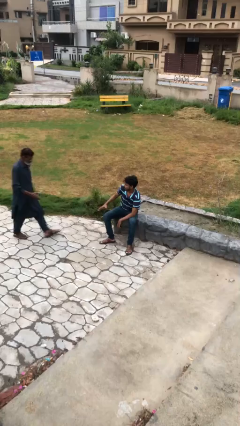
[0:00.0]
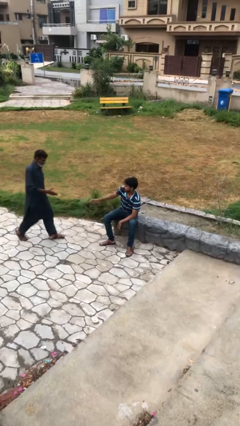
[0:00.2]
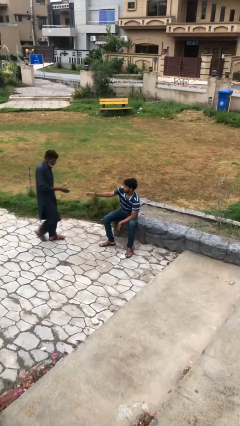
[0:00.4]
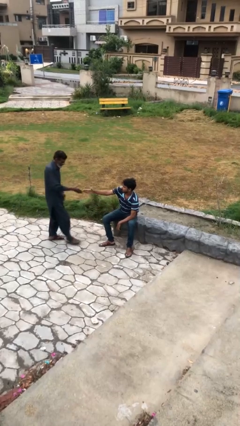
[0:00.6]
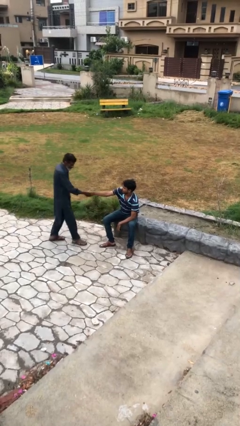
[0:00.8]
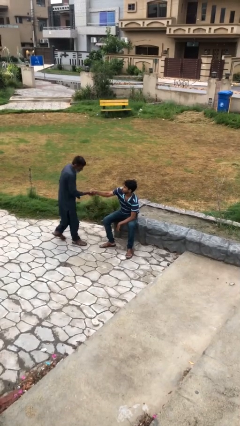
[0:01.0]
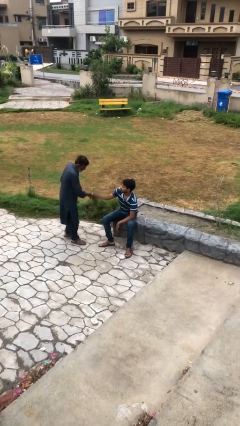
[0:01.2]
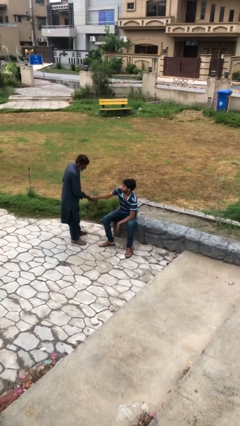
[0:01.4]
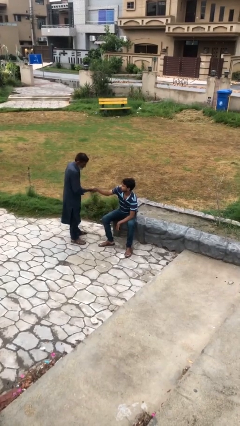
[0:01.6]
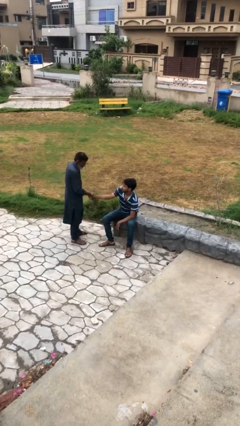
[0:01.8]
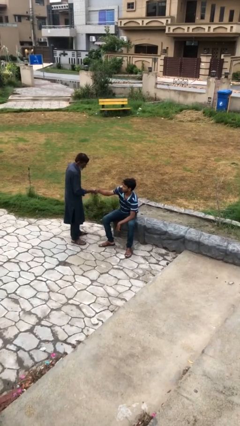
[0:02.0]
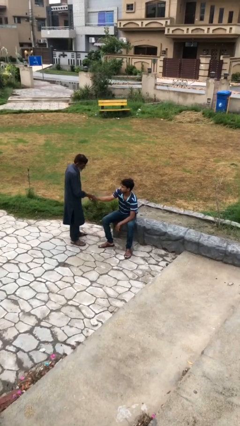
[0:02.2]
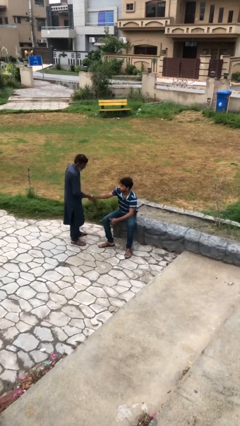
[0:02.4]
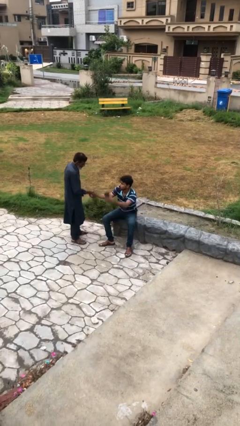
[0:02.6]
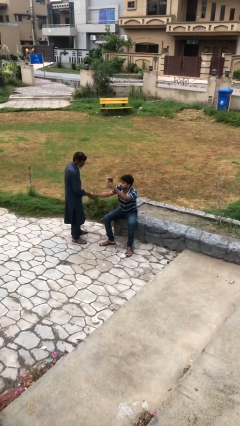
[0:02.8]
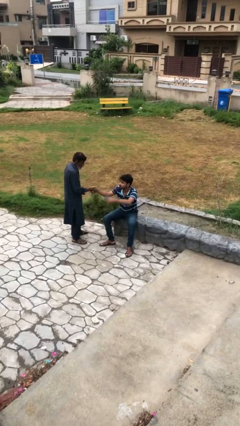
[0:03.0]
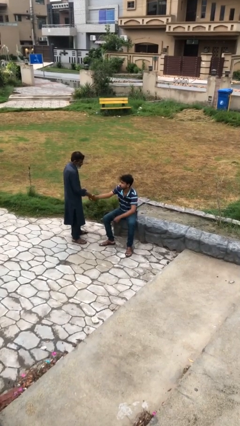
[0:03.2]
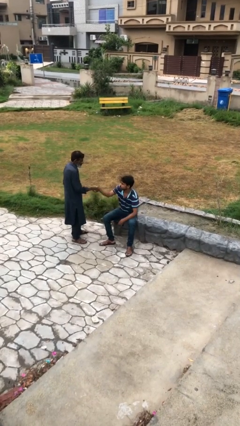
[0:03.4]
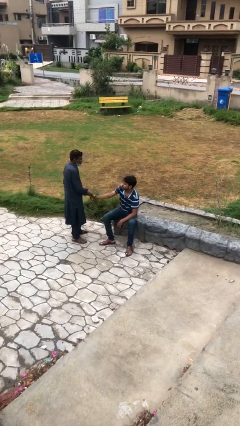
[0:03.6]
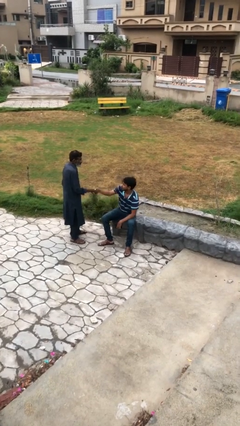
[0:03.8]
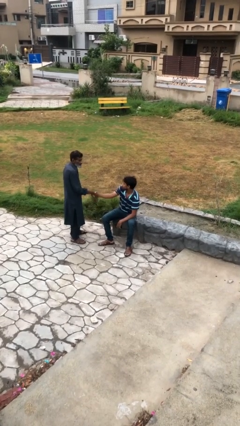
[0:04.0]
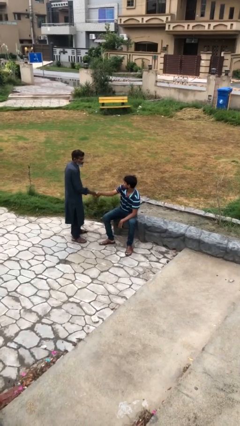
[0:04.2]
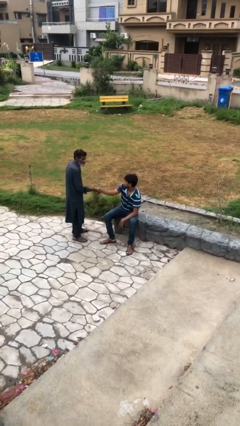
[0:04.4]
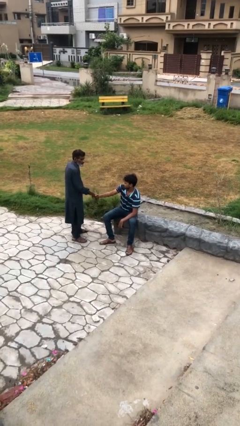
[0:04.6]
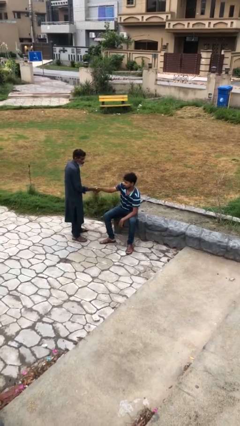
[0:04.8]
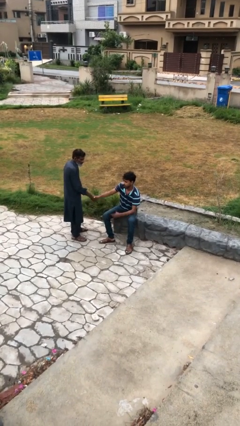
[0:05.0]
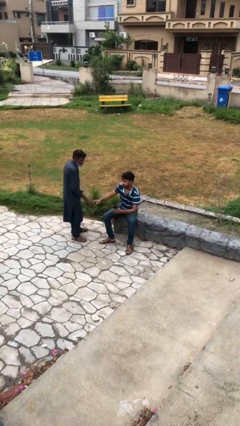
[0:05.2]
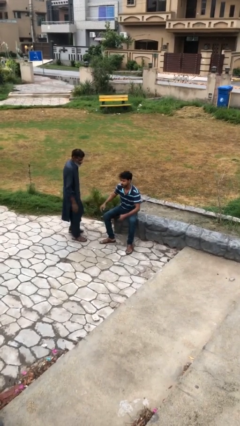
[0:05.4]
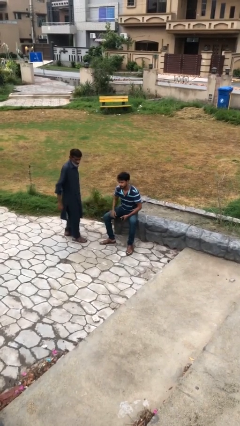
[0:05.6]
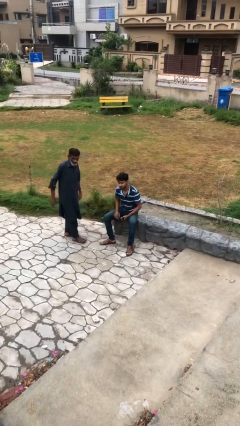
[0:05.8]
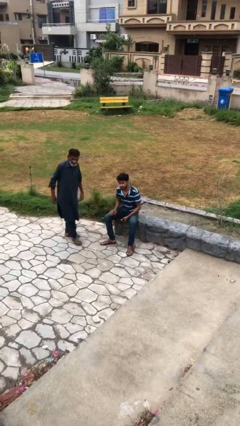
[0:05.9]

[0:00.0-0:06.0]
person shakes hand

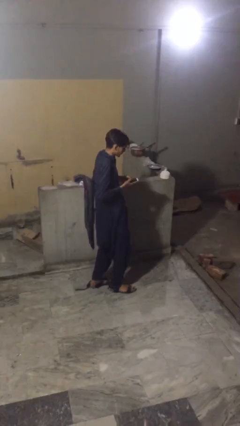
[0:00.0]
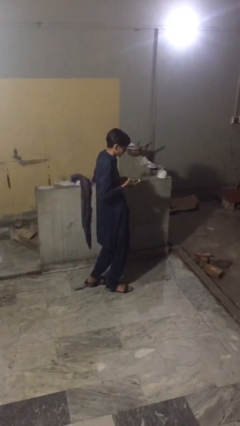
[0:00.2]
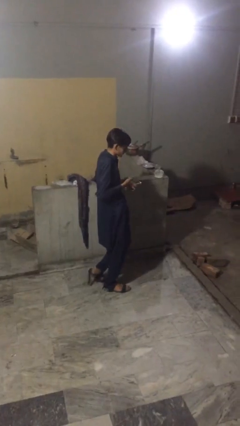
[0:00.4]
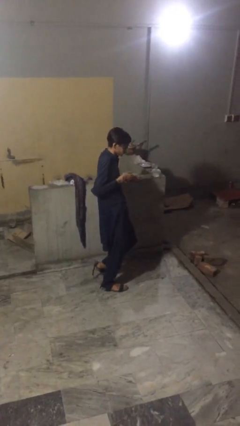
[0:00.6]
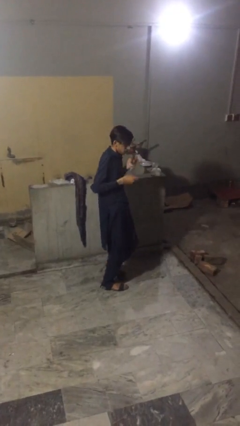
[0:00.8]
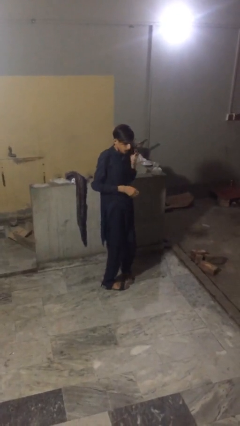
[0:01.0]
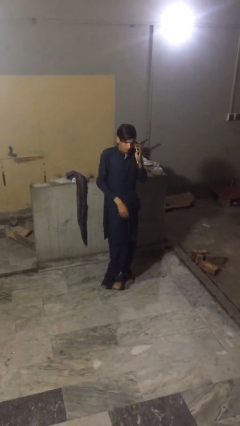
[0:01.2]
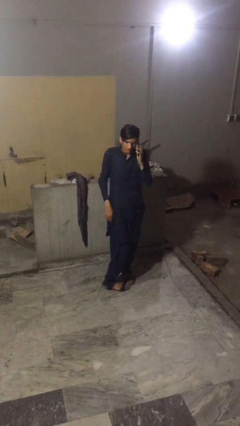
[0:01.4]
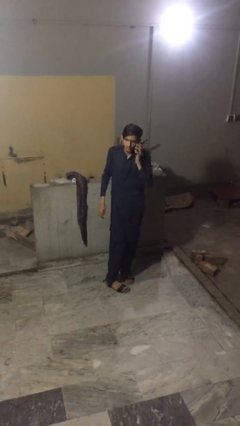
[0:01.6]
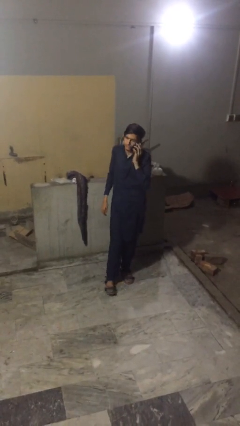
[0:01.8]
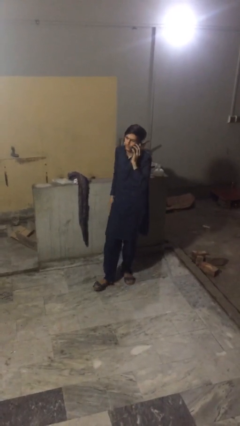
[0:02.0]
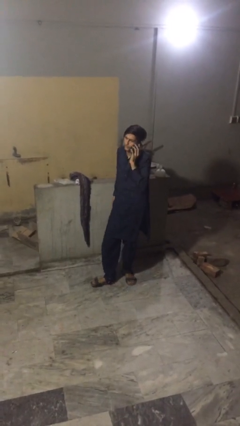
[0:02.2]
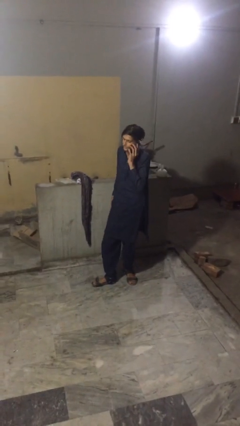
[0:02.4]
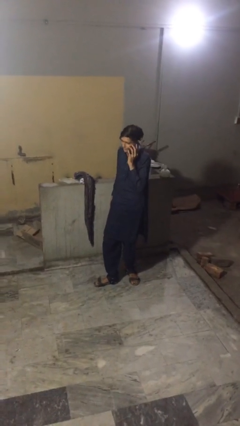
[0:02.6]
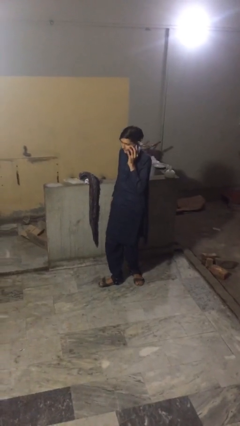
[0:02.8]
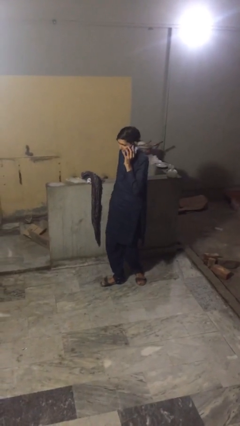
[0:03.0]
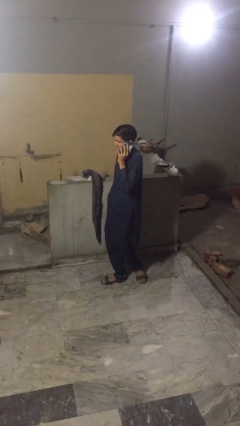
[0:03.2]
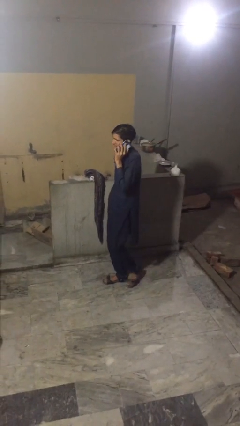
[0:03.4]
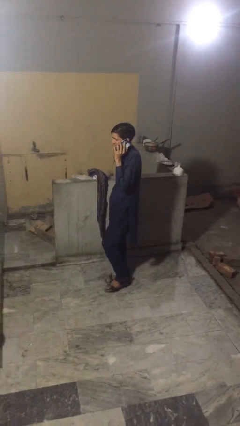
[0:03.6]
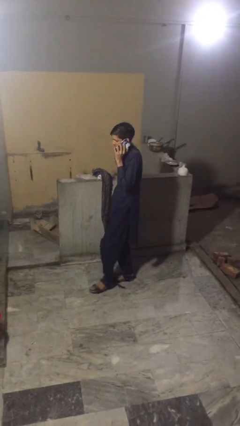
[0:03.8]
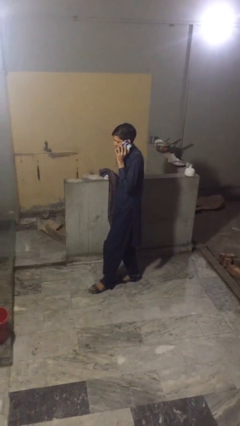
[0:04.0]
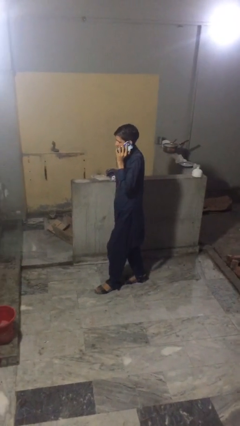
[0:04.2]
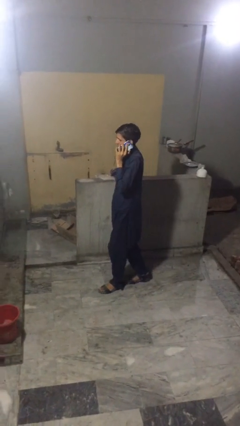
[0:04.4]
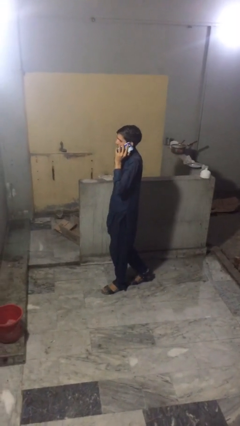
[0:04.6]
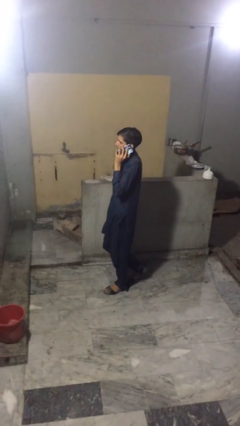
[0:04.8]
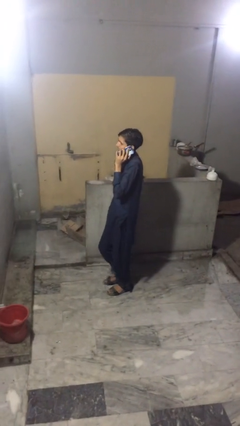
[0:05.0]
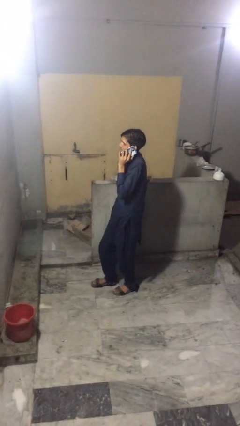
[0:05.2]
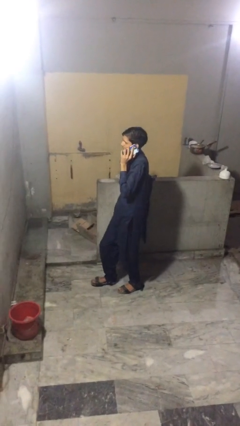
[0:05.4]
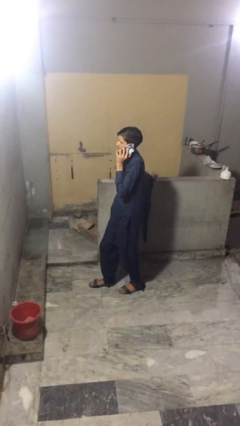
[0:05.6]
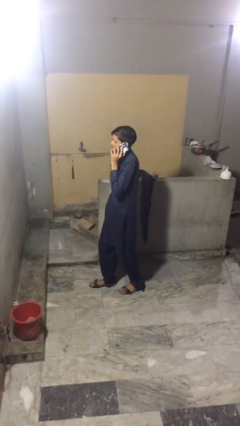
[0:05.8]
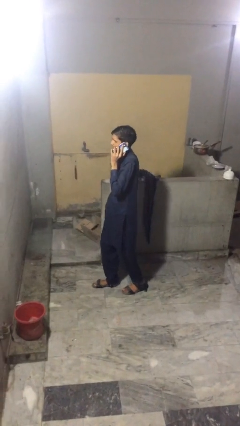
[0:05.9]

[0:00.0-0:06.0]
person talks on phone

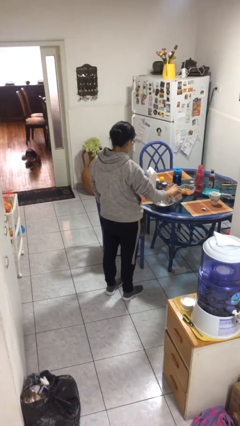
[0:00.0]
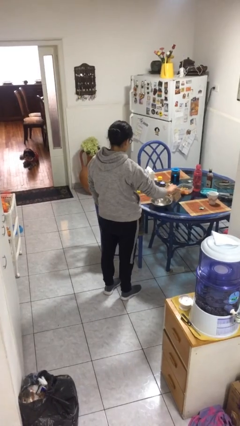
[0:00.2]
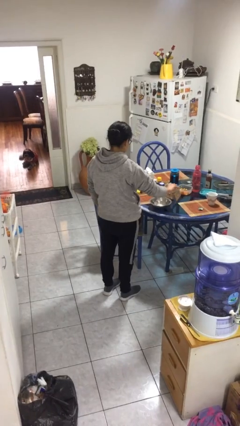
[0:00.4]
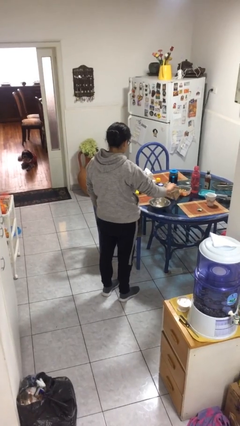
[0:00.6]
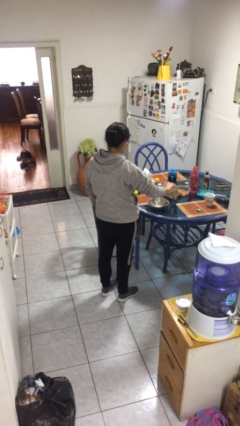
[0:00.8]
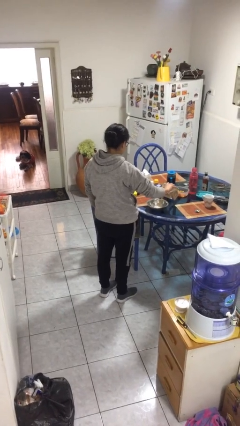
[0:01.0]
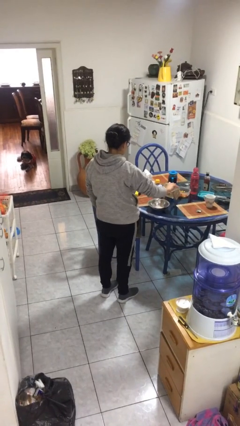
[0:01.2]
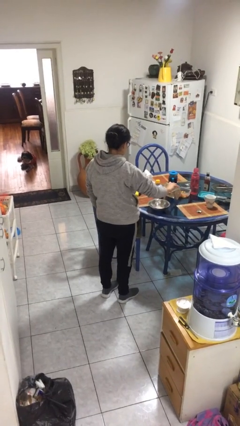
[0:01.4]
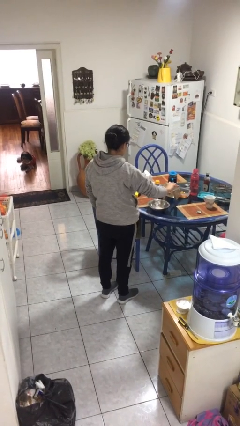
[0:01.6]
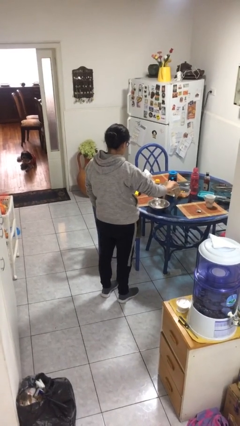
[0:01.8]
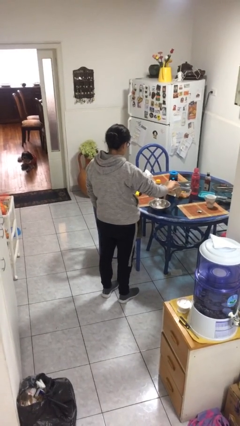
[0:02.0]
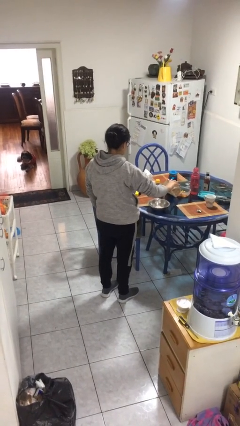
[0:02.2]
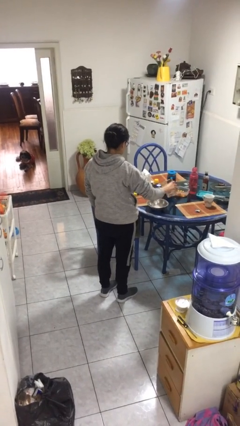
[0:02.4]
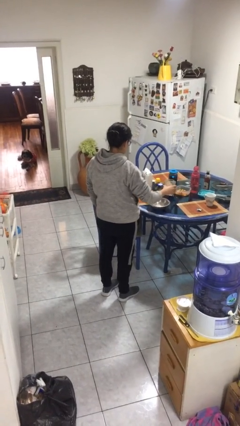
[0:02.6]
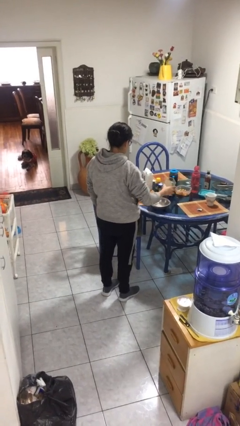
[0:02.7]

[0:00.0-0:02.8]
person pours into bowl

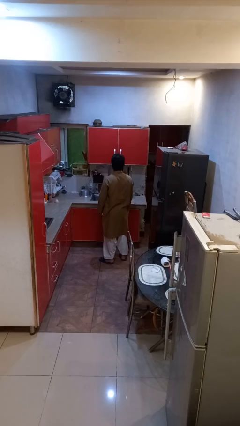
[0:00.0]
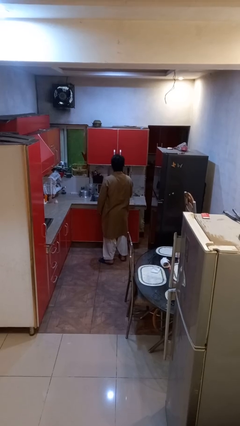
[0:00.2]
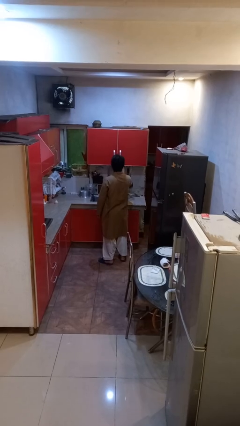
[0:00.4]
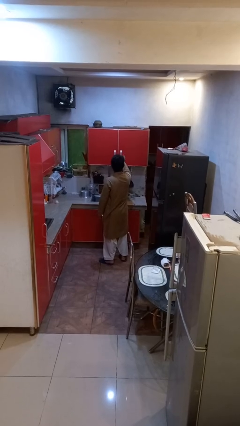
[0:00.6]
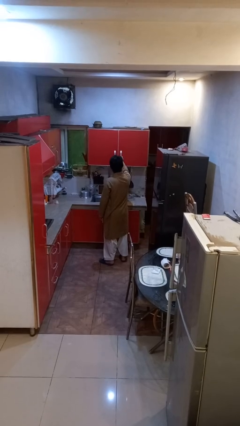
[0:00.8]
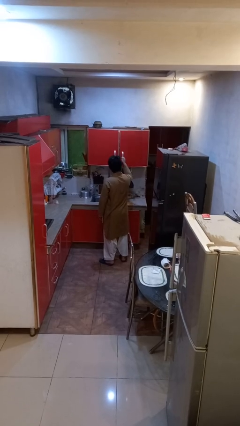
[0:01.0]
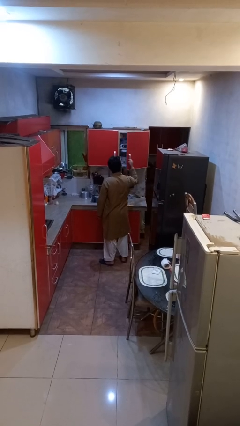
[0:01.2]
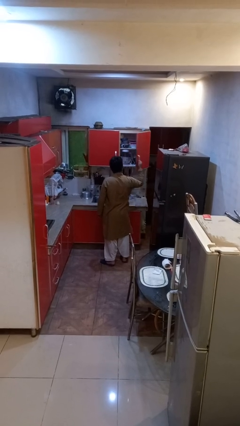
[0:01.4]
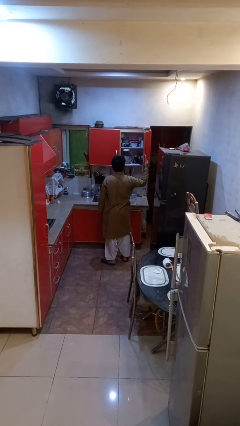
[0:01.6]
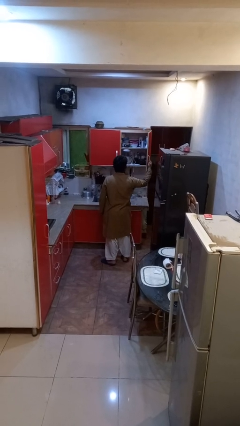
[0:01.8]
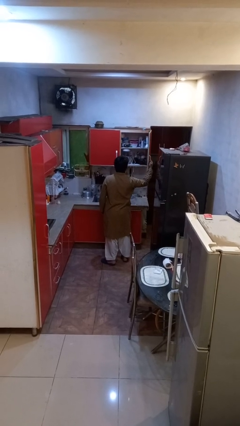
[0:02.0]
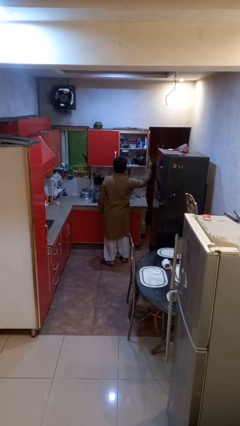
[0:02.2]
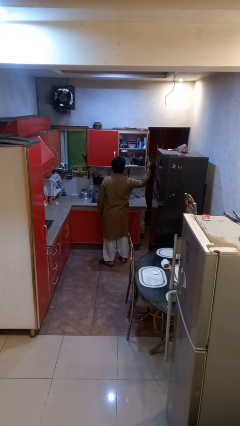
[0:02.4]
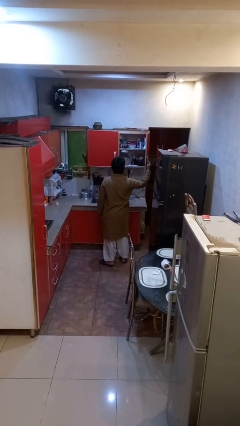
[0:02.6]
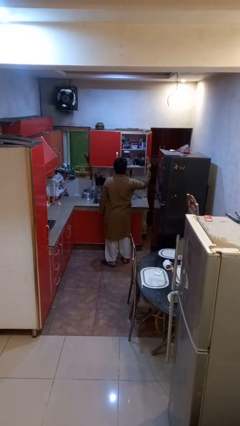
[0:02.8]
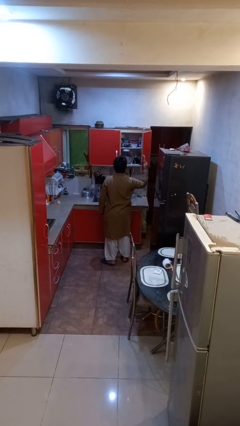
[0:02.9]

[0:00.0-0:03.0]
person opens cabinet

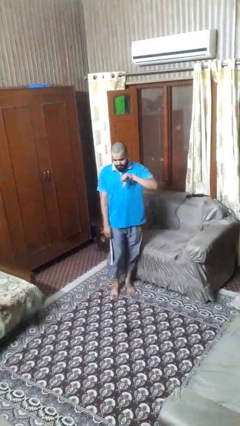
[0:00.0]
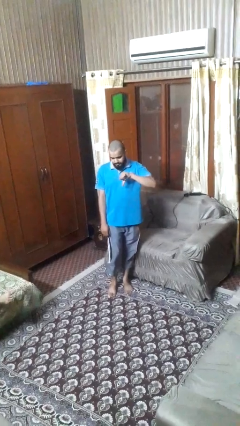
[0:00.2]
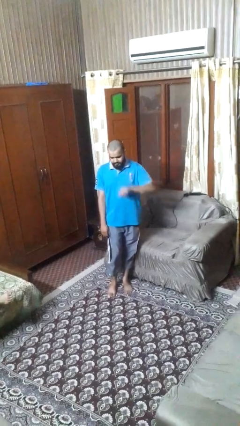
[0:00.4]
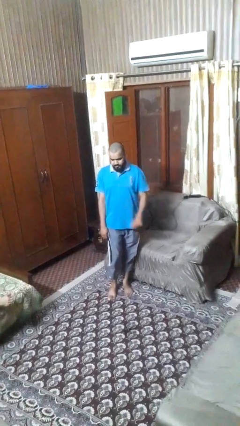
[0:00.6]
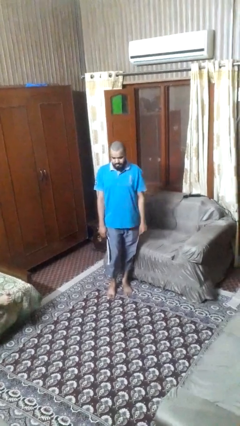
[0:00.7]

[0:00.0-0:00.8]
person gestures thumbs down
